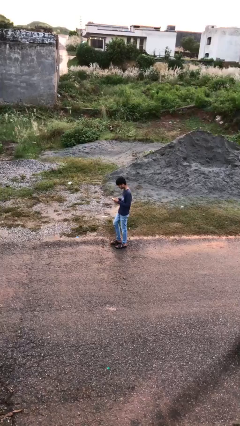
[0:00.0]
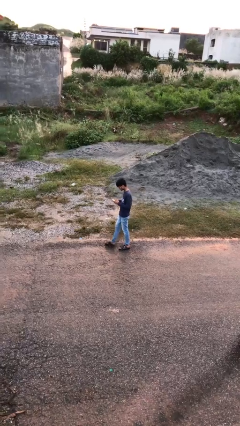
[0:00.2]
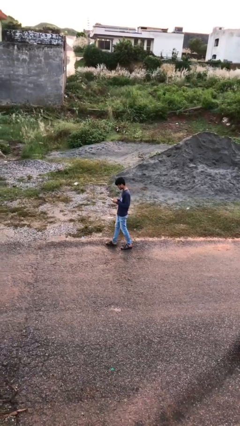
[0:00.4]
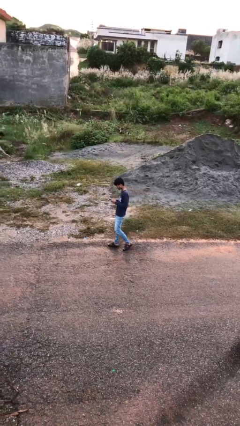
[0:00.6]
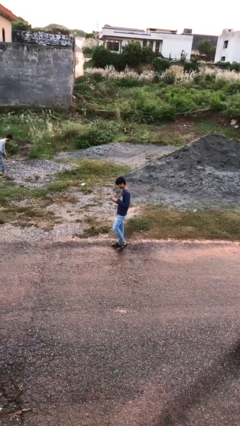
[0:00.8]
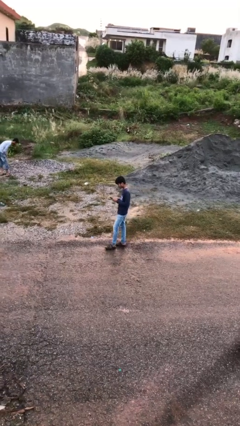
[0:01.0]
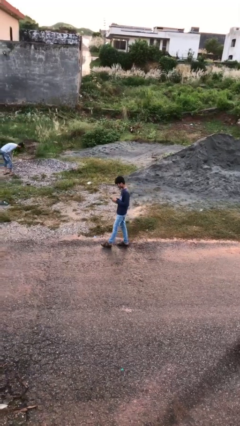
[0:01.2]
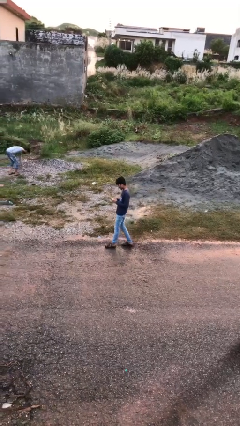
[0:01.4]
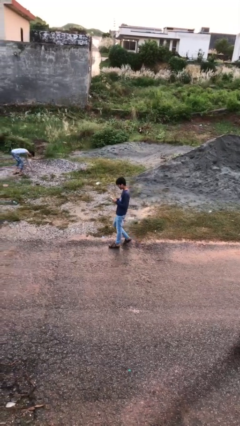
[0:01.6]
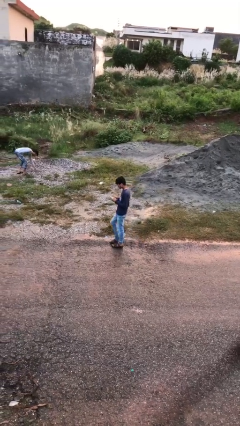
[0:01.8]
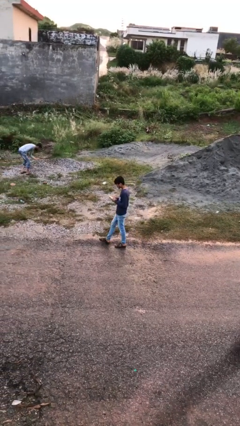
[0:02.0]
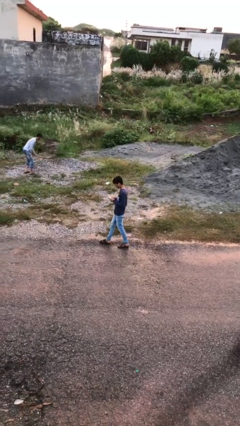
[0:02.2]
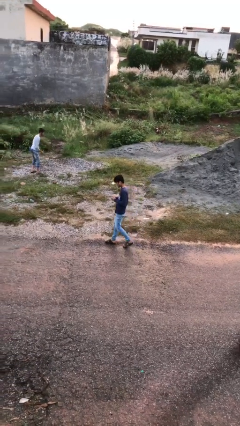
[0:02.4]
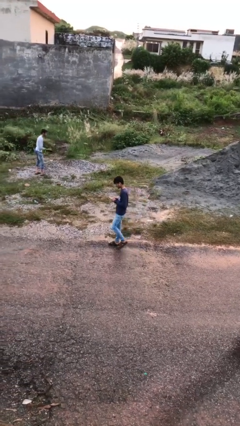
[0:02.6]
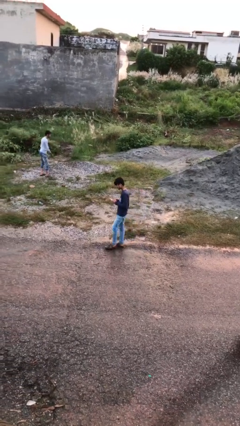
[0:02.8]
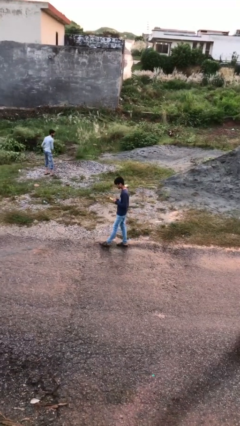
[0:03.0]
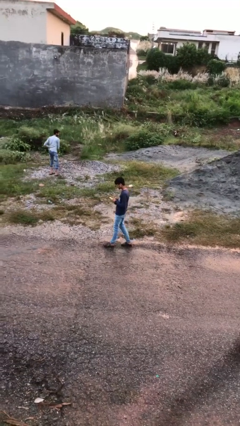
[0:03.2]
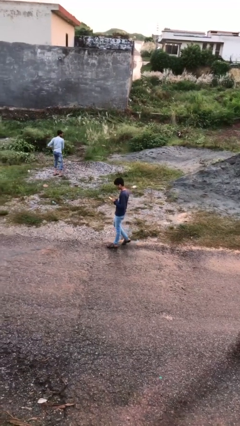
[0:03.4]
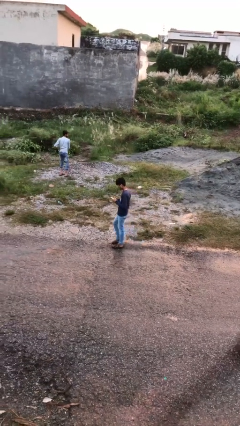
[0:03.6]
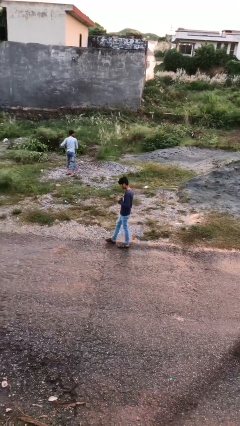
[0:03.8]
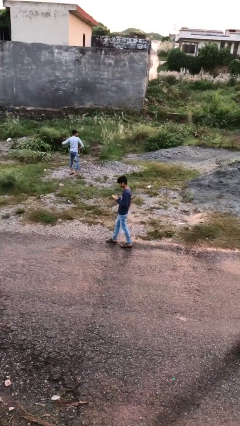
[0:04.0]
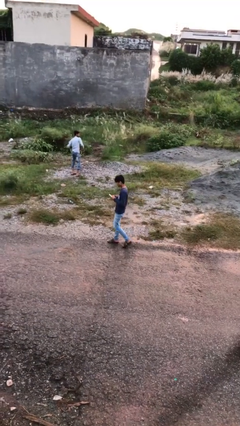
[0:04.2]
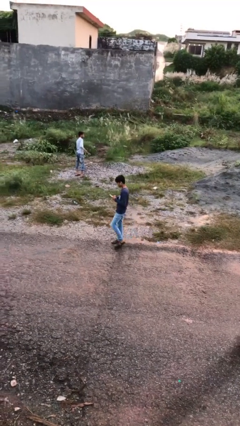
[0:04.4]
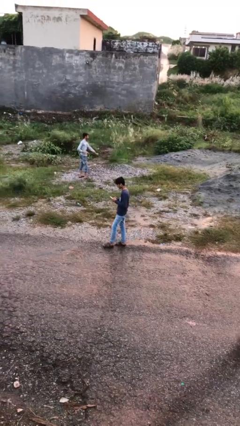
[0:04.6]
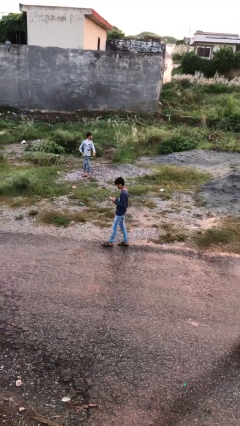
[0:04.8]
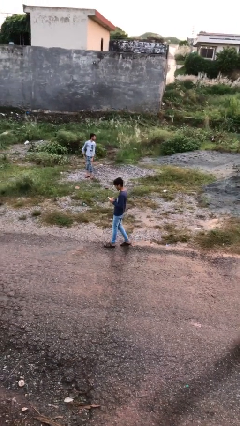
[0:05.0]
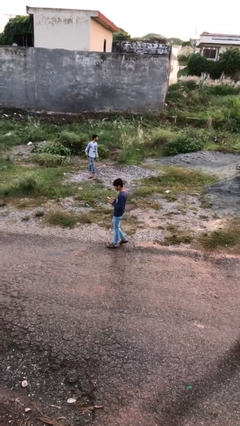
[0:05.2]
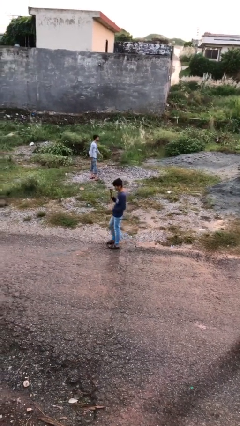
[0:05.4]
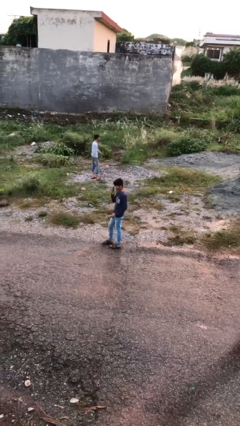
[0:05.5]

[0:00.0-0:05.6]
person texts on phone

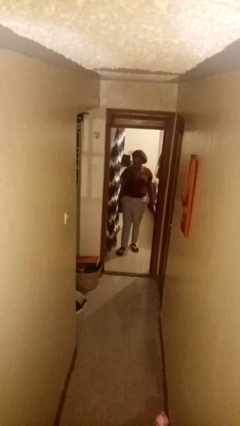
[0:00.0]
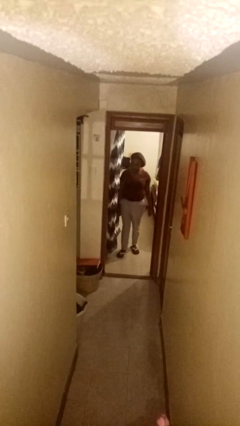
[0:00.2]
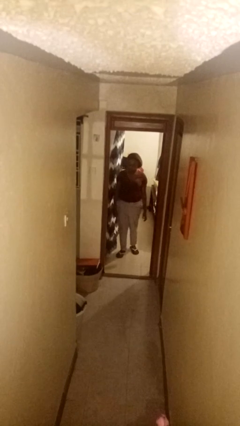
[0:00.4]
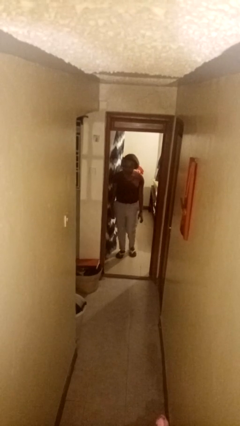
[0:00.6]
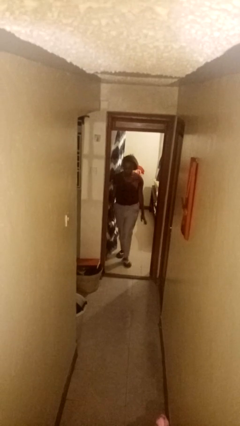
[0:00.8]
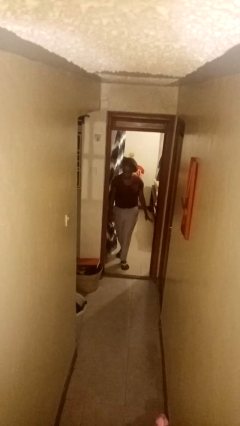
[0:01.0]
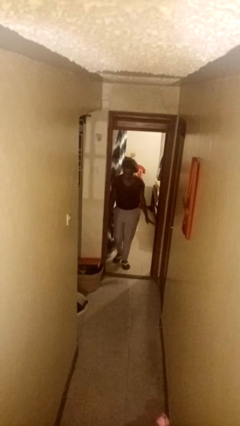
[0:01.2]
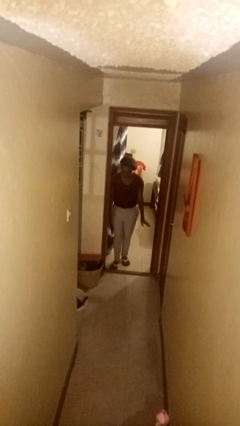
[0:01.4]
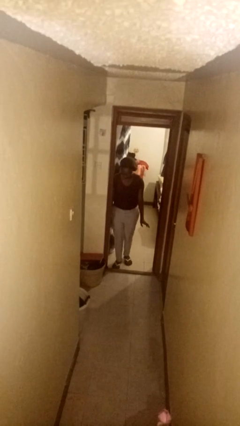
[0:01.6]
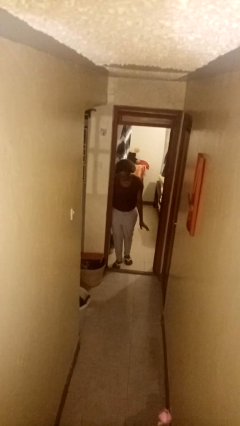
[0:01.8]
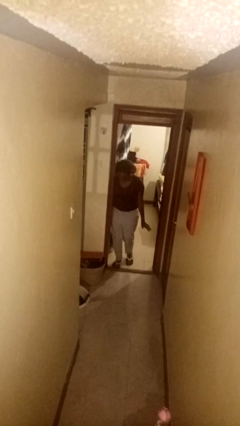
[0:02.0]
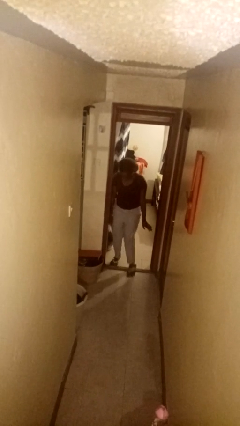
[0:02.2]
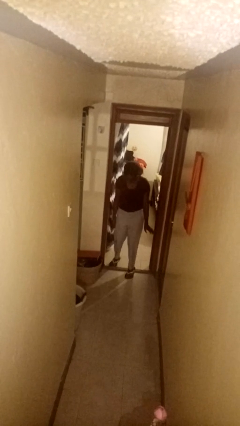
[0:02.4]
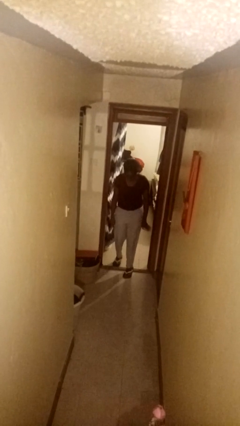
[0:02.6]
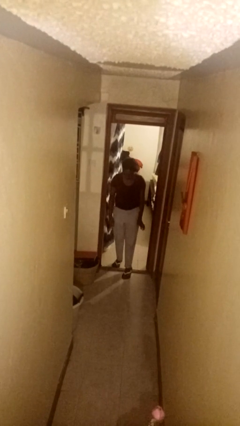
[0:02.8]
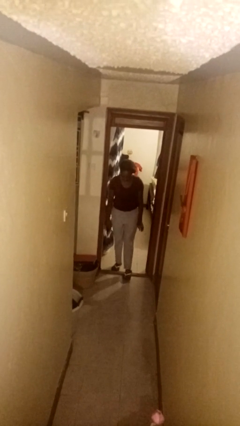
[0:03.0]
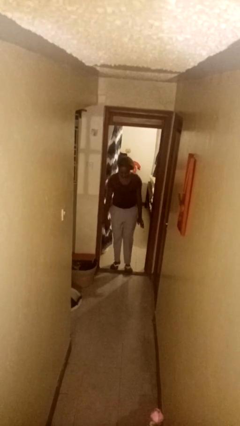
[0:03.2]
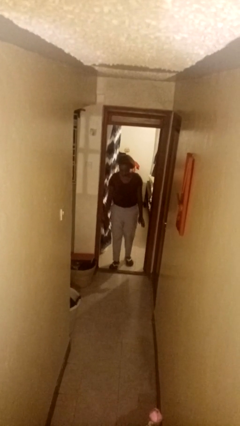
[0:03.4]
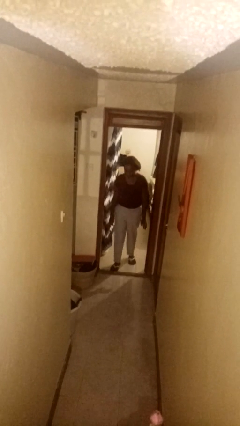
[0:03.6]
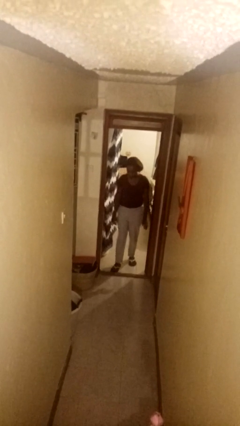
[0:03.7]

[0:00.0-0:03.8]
person bumps into wall

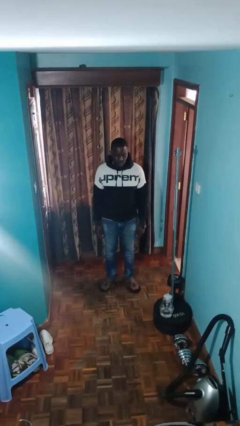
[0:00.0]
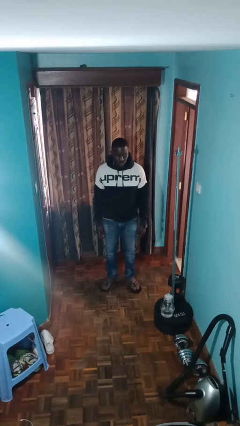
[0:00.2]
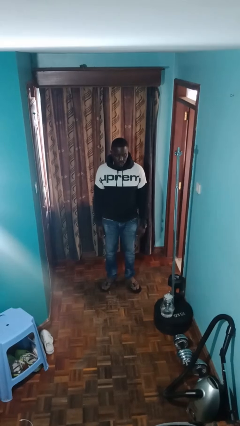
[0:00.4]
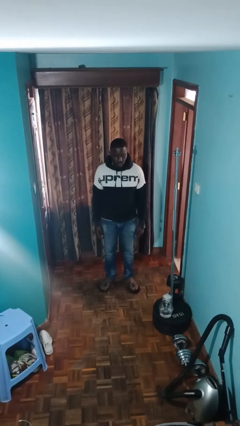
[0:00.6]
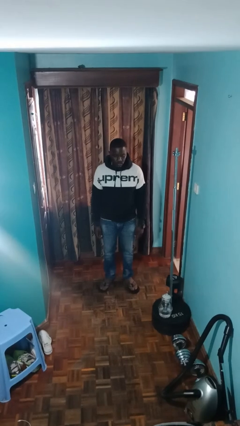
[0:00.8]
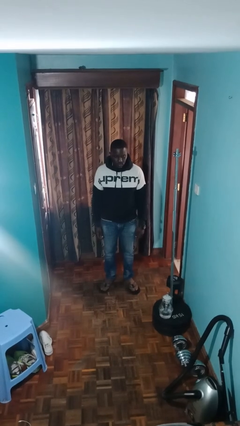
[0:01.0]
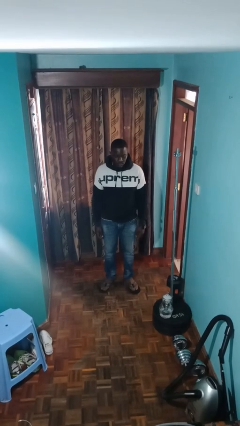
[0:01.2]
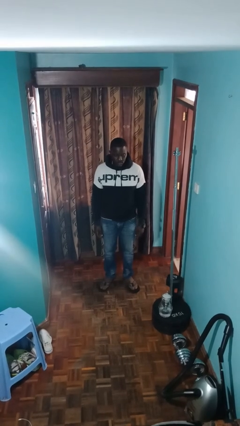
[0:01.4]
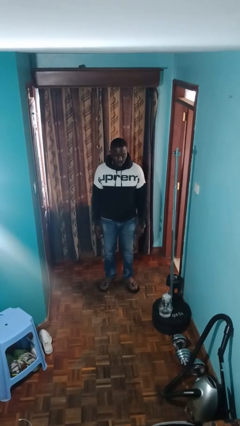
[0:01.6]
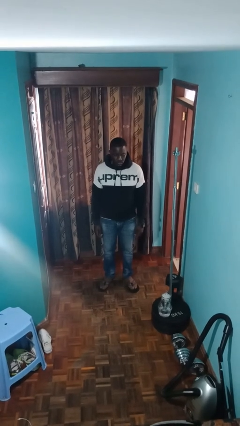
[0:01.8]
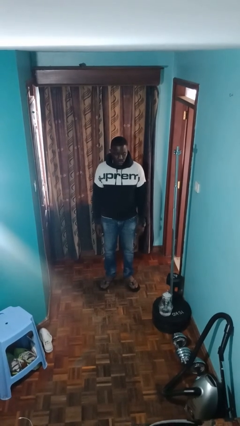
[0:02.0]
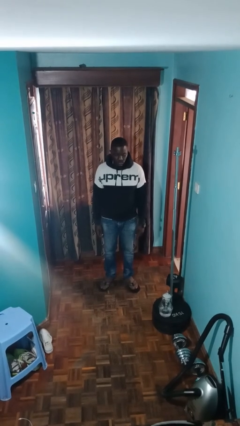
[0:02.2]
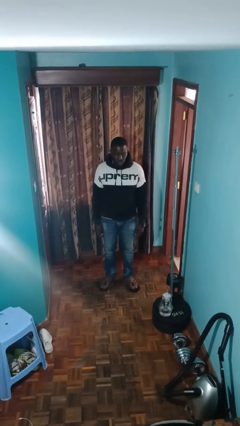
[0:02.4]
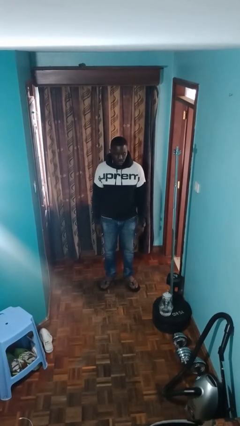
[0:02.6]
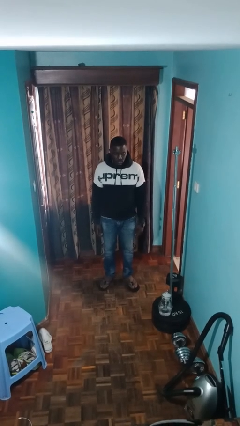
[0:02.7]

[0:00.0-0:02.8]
person puts phone into pocket

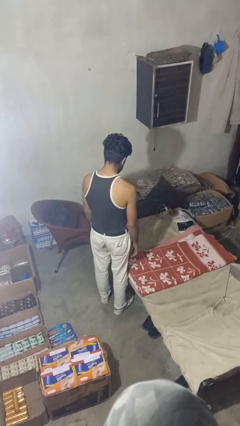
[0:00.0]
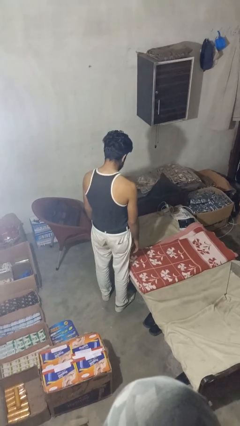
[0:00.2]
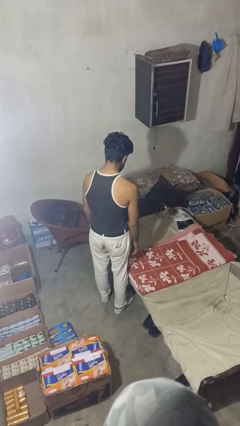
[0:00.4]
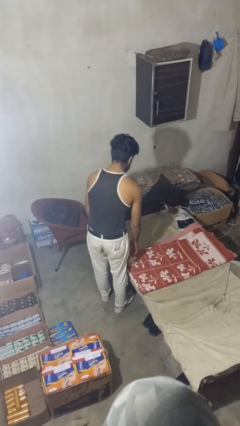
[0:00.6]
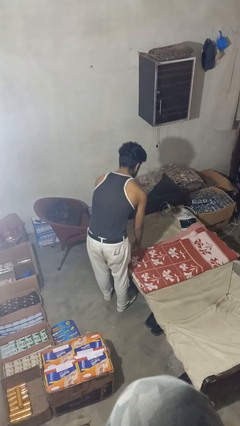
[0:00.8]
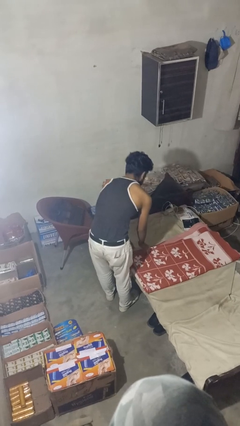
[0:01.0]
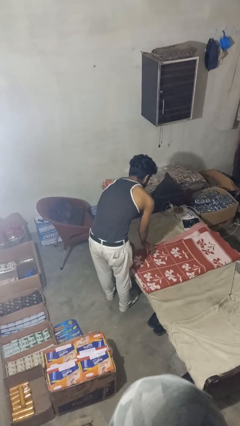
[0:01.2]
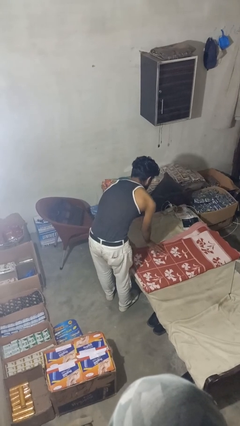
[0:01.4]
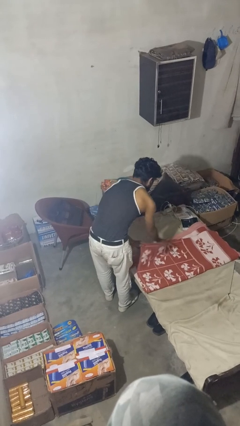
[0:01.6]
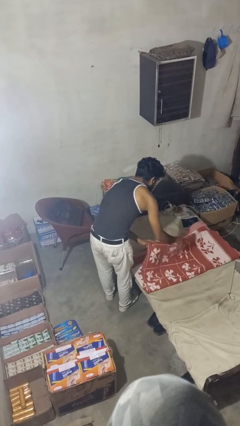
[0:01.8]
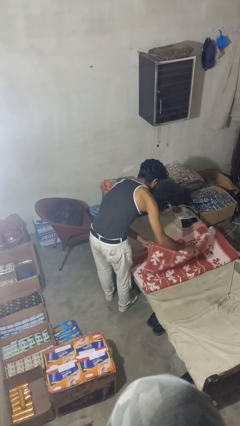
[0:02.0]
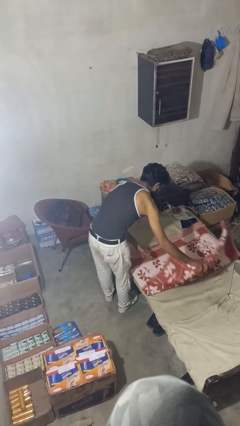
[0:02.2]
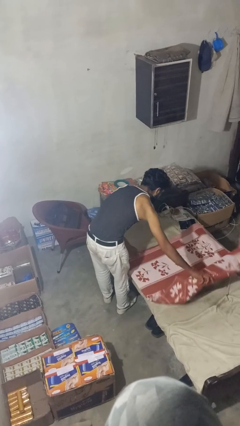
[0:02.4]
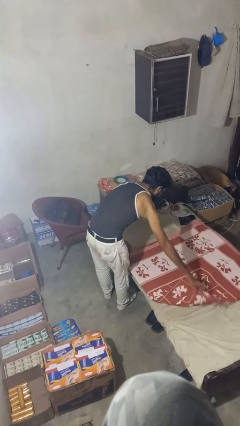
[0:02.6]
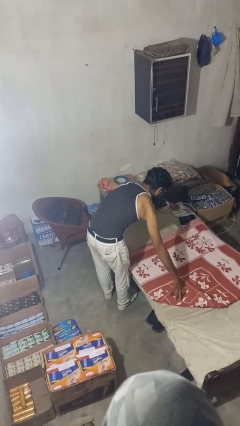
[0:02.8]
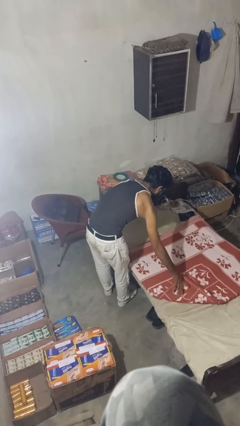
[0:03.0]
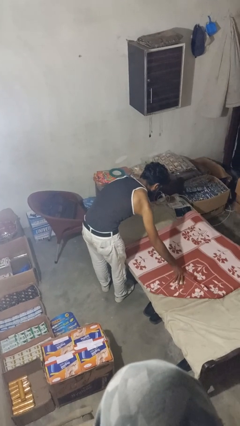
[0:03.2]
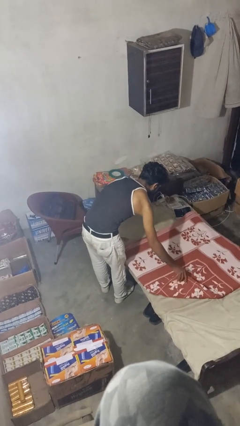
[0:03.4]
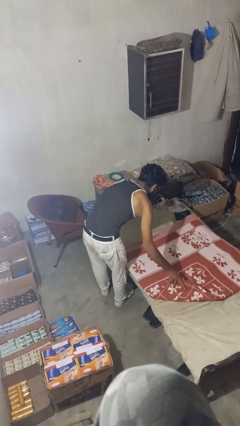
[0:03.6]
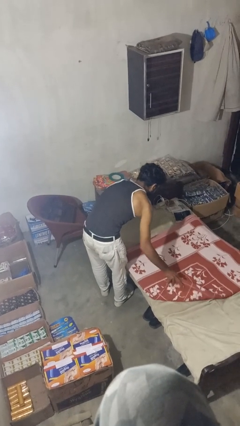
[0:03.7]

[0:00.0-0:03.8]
person makes bed

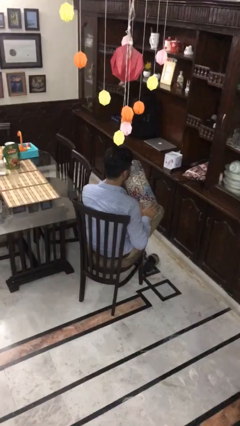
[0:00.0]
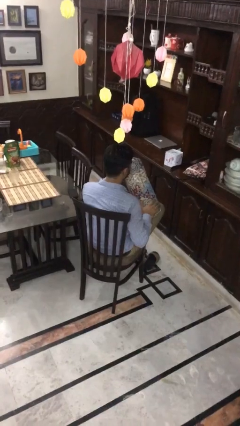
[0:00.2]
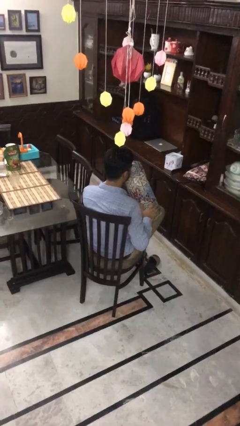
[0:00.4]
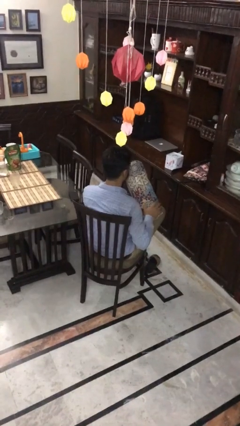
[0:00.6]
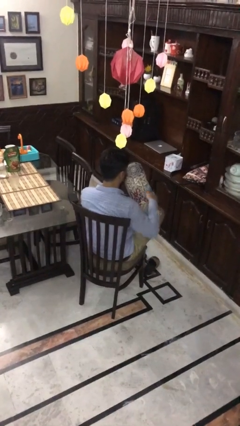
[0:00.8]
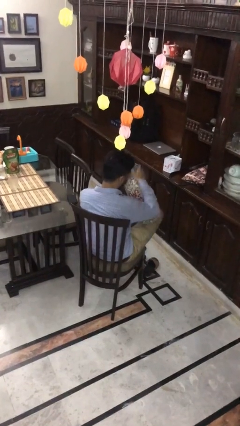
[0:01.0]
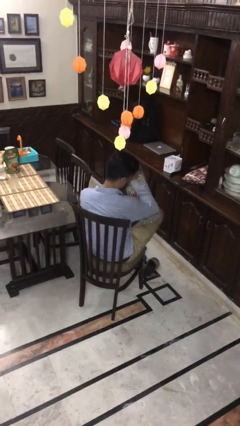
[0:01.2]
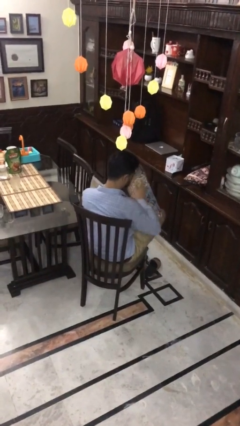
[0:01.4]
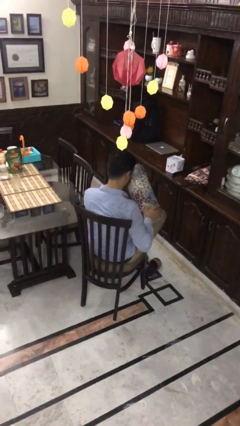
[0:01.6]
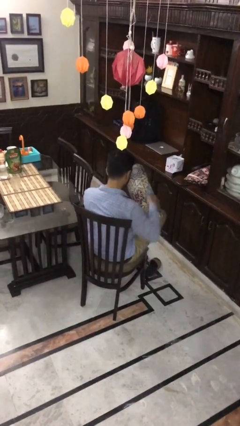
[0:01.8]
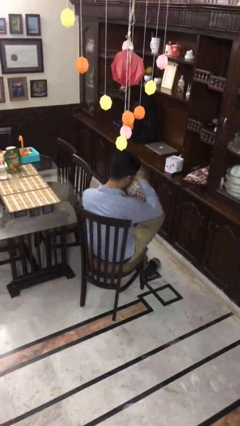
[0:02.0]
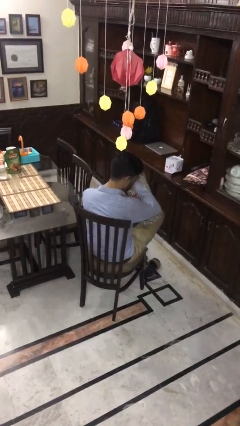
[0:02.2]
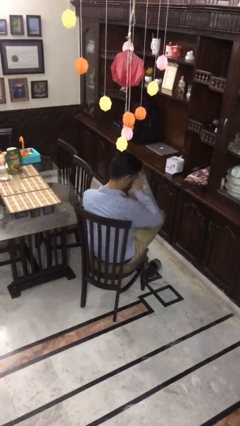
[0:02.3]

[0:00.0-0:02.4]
person waves hand over object
